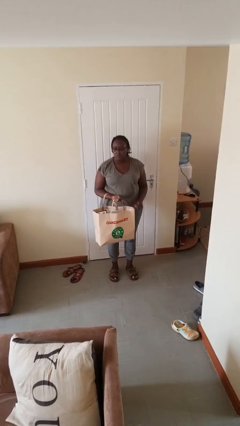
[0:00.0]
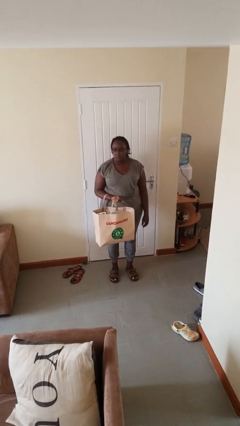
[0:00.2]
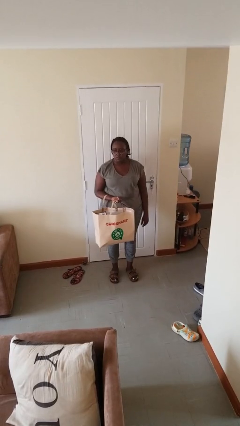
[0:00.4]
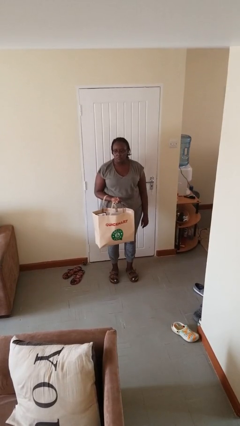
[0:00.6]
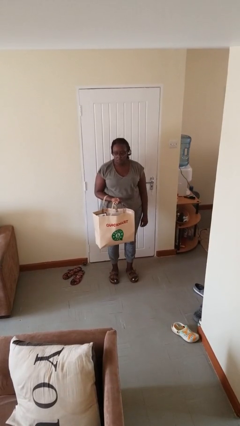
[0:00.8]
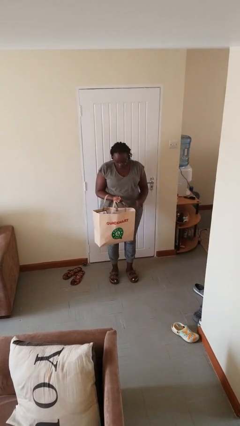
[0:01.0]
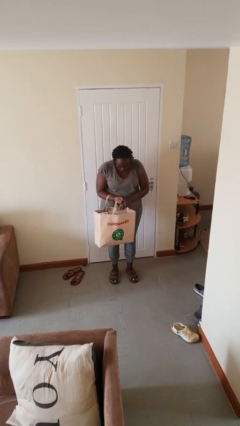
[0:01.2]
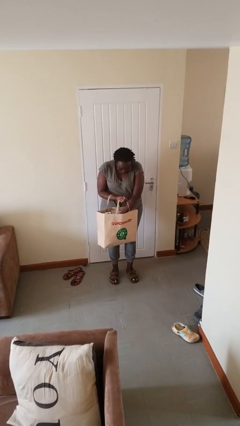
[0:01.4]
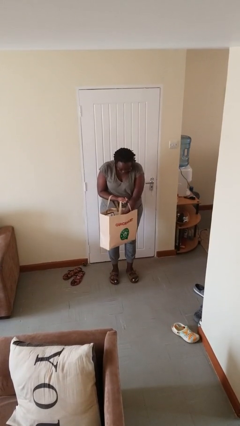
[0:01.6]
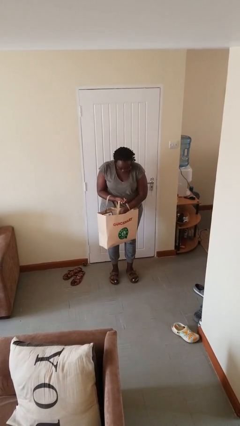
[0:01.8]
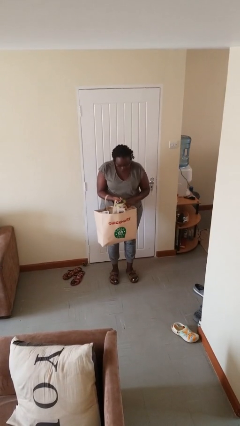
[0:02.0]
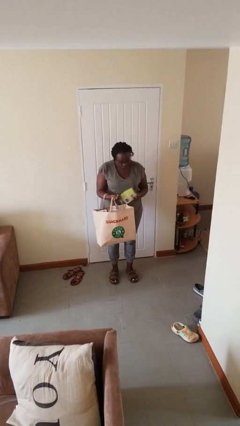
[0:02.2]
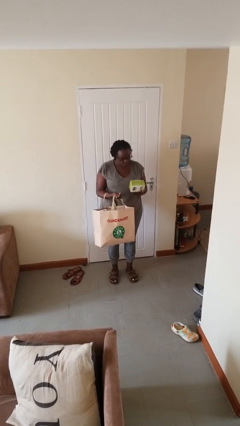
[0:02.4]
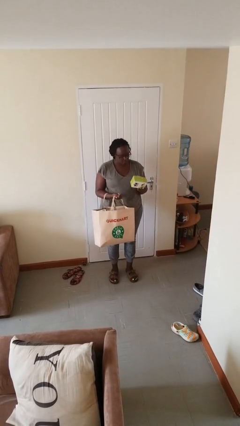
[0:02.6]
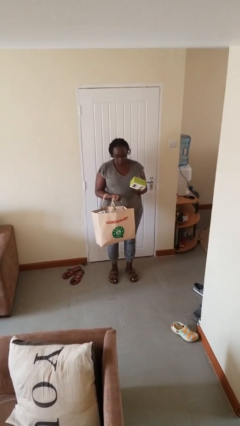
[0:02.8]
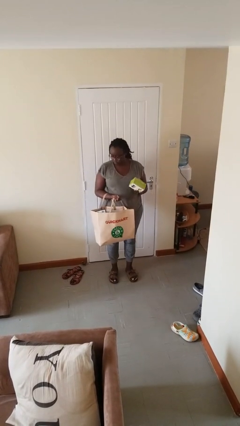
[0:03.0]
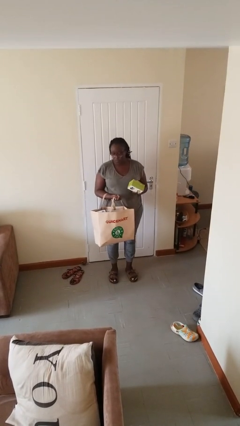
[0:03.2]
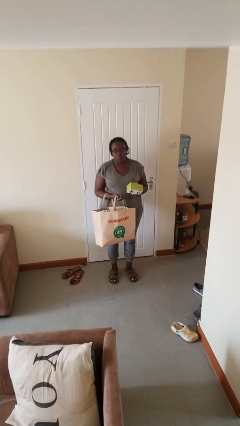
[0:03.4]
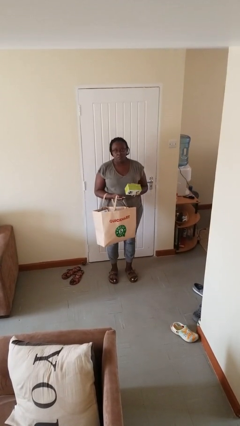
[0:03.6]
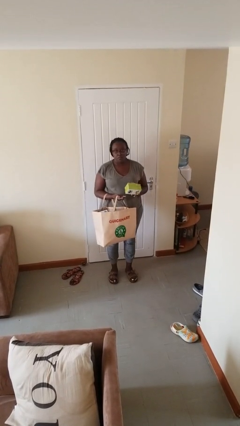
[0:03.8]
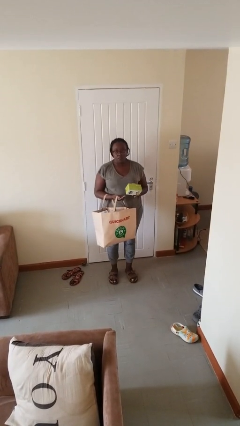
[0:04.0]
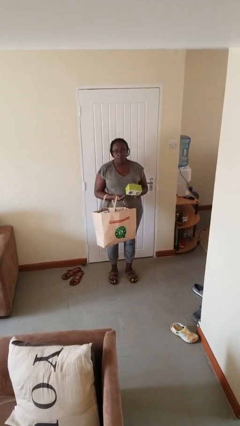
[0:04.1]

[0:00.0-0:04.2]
person takes object from bag

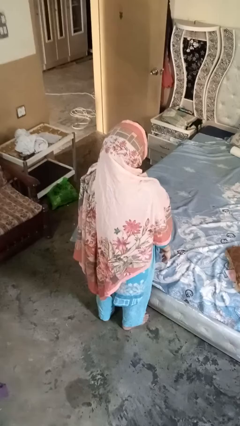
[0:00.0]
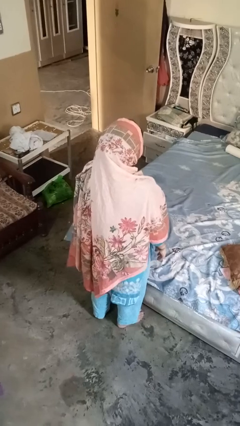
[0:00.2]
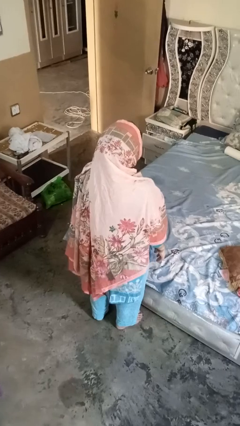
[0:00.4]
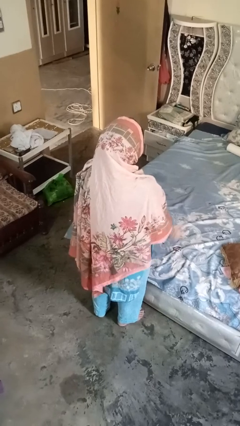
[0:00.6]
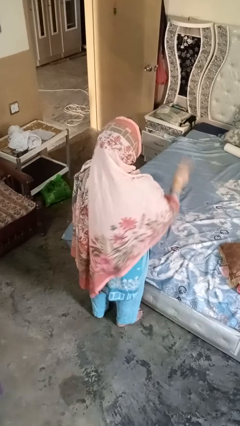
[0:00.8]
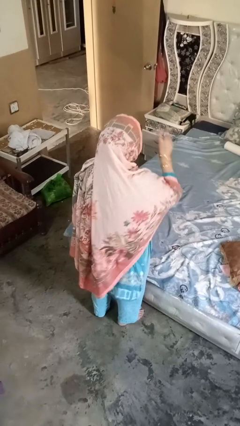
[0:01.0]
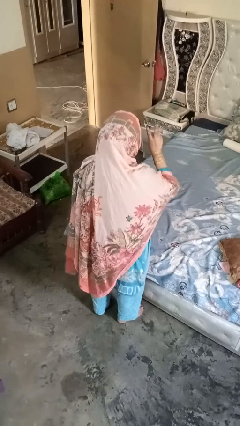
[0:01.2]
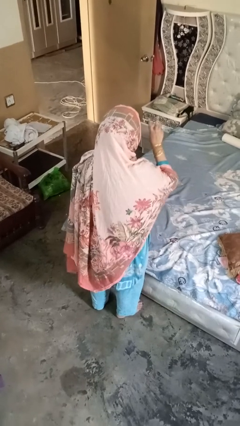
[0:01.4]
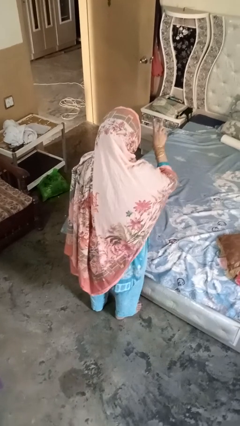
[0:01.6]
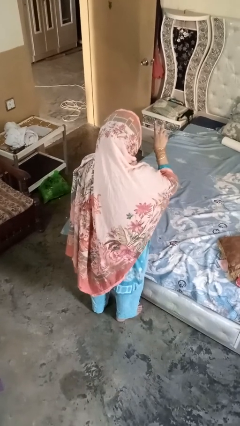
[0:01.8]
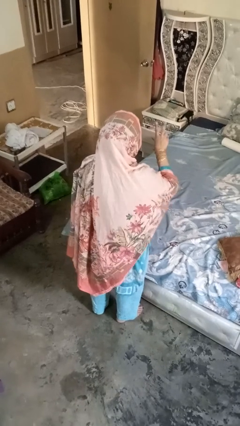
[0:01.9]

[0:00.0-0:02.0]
person gestures be quiet

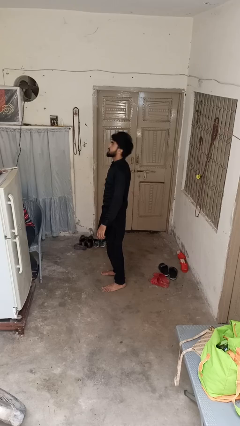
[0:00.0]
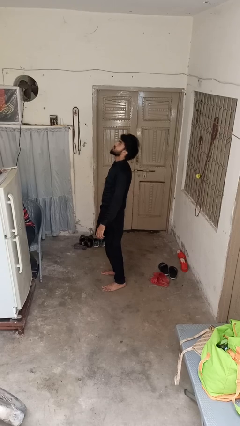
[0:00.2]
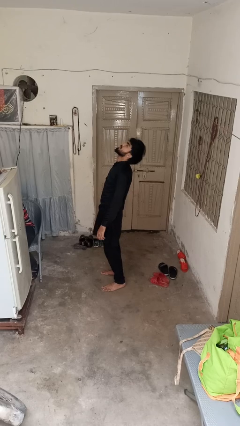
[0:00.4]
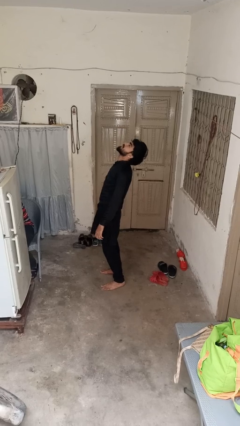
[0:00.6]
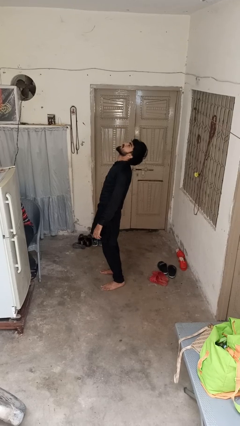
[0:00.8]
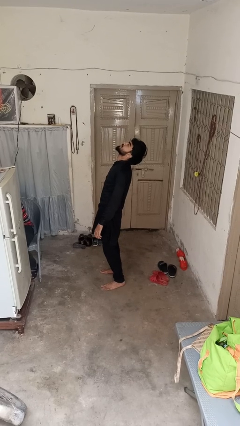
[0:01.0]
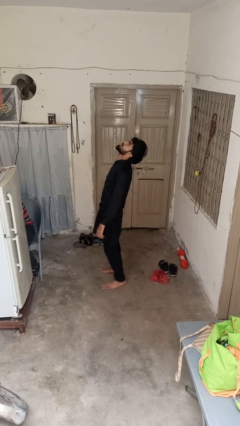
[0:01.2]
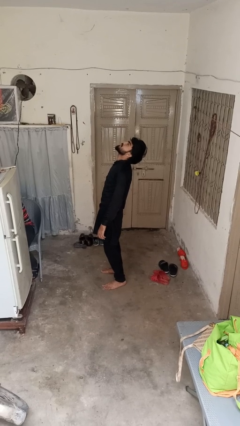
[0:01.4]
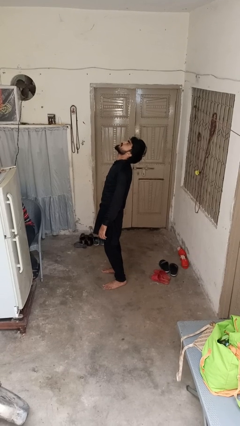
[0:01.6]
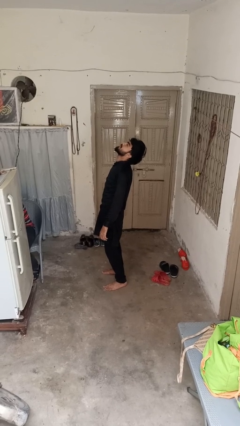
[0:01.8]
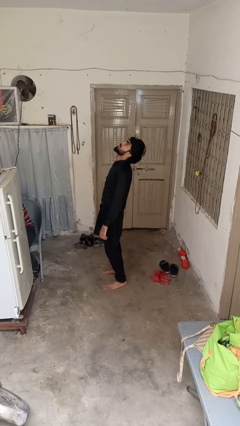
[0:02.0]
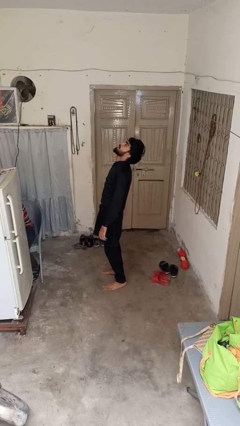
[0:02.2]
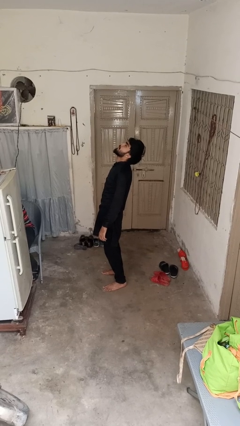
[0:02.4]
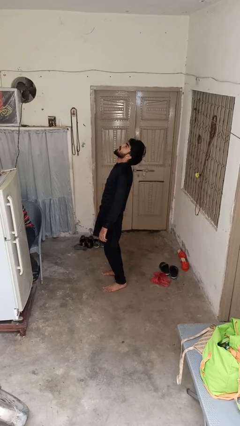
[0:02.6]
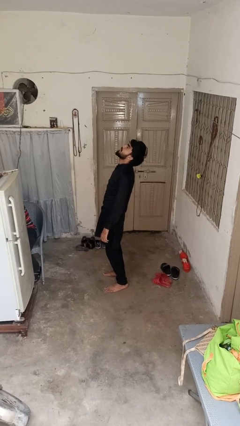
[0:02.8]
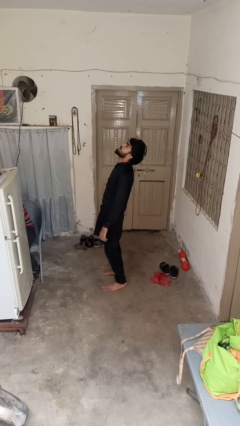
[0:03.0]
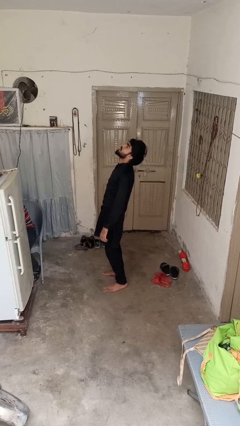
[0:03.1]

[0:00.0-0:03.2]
person stretches back

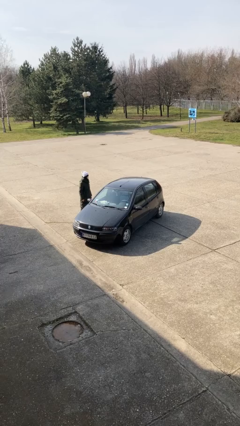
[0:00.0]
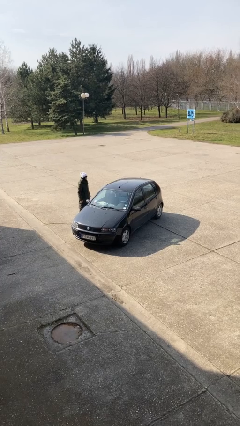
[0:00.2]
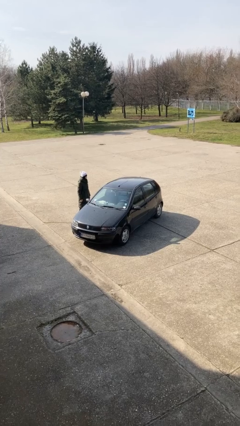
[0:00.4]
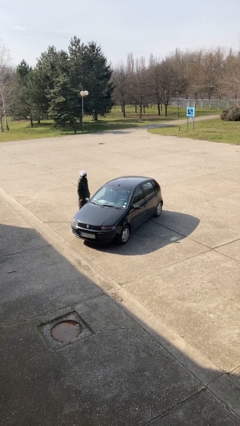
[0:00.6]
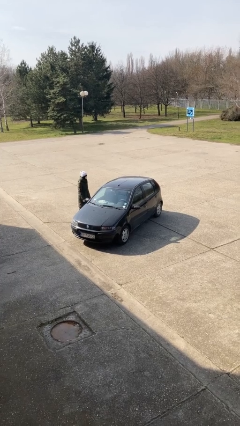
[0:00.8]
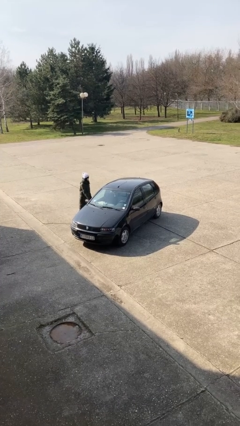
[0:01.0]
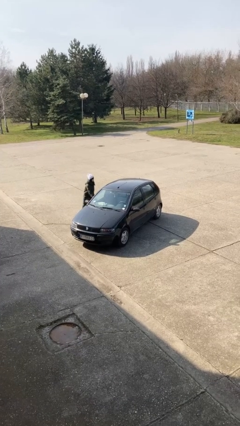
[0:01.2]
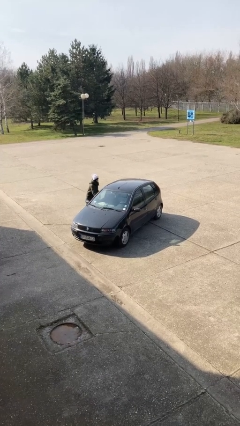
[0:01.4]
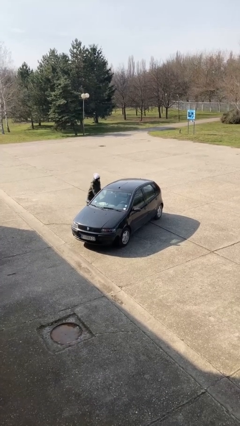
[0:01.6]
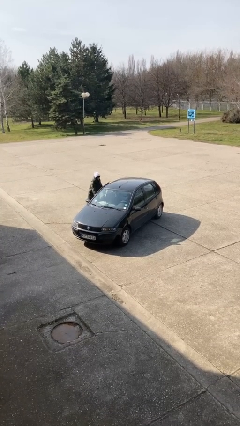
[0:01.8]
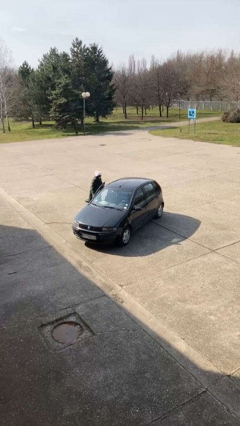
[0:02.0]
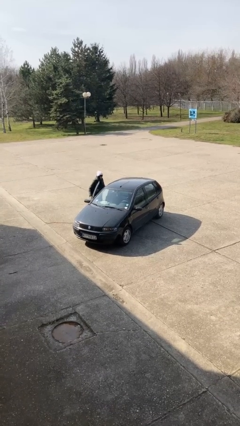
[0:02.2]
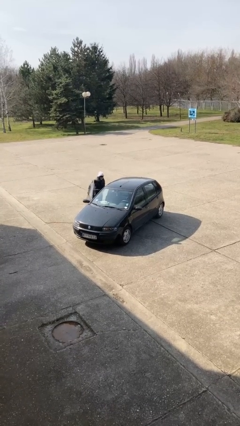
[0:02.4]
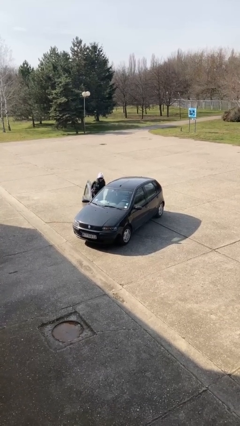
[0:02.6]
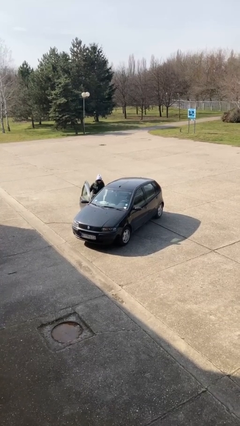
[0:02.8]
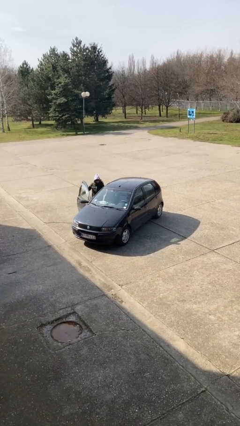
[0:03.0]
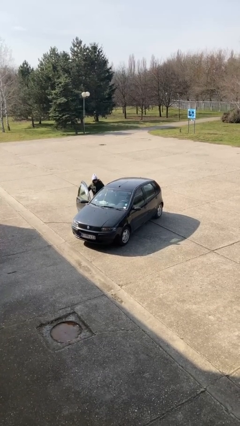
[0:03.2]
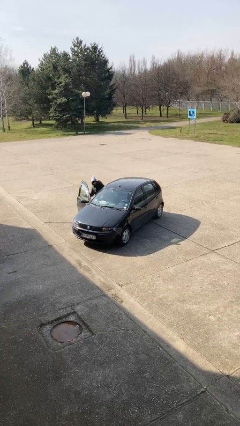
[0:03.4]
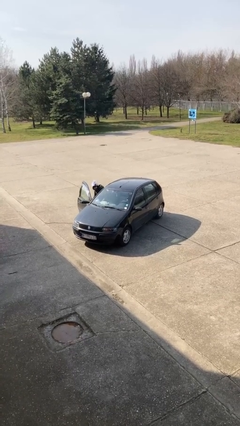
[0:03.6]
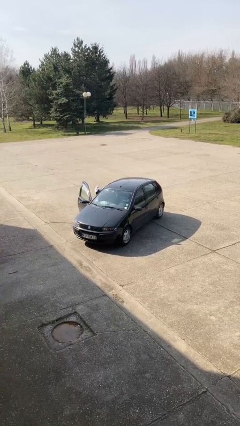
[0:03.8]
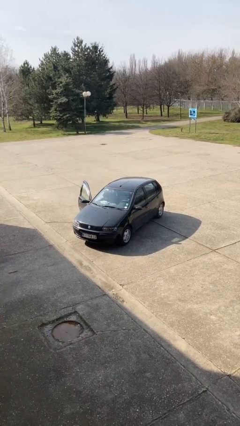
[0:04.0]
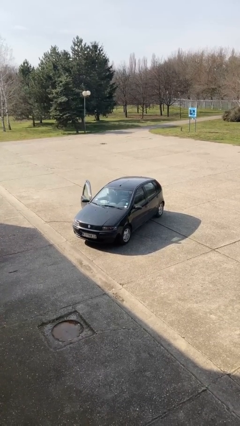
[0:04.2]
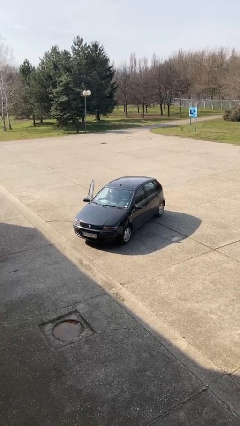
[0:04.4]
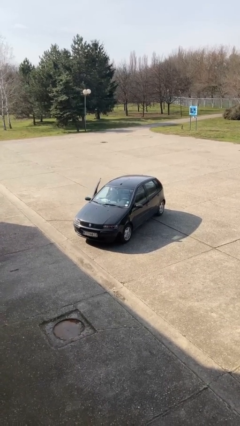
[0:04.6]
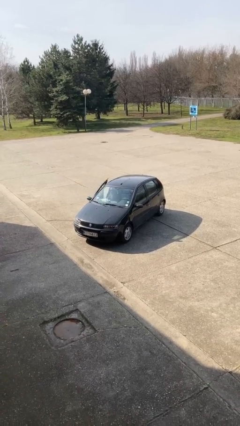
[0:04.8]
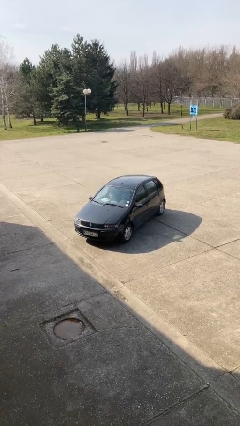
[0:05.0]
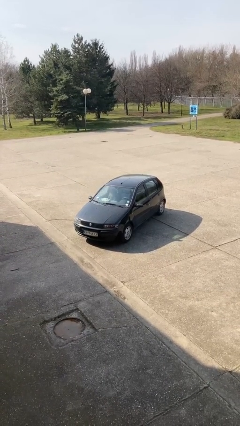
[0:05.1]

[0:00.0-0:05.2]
car picks up person

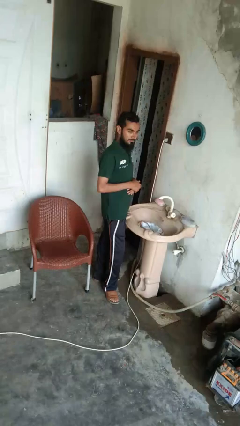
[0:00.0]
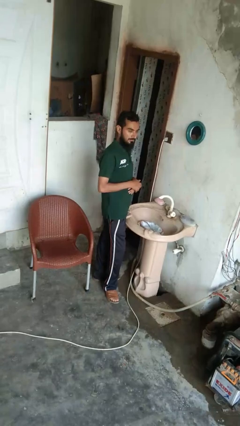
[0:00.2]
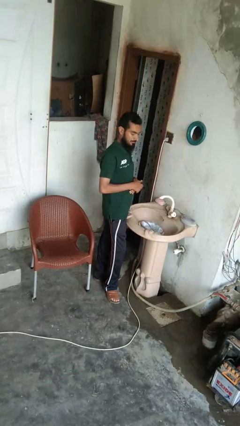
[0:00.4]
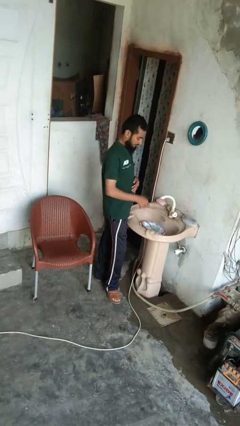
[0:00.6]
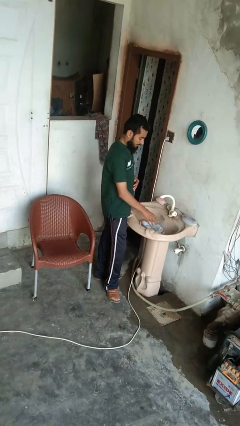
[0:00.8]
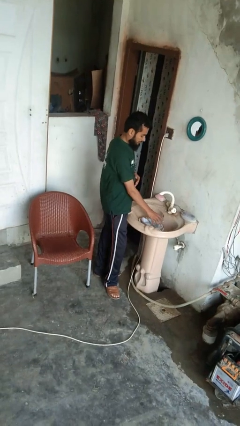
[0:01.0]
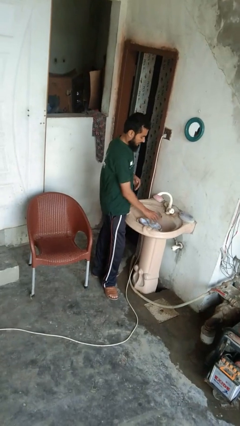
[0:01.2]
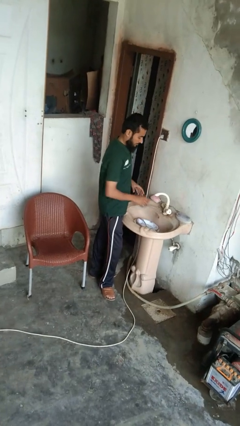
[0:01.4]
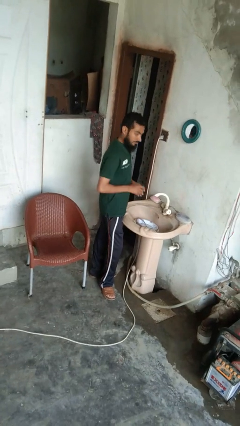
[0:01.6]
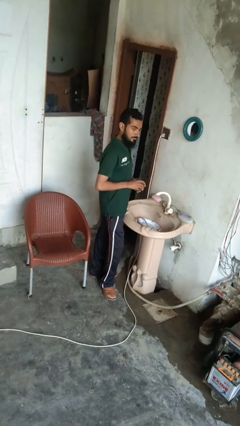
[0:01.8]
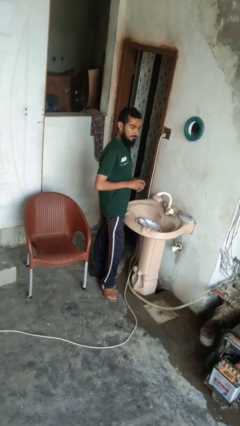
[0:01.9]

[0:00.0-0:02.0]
person unloads dishwasher

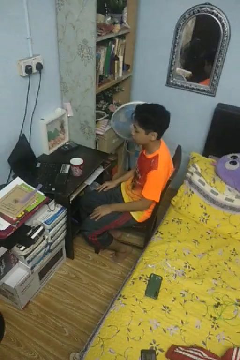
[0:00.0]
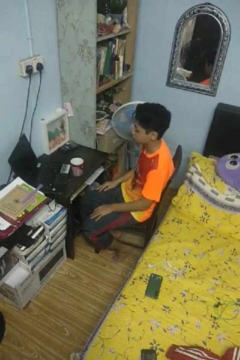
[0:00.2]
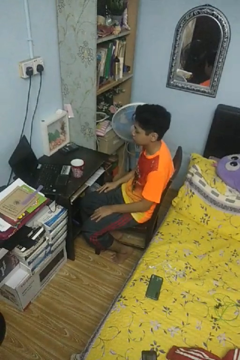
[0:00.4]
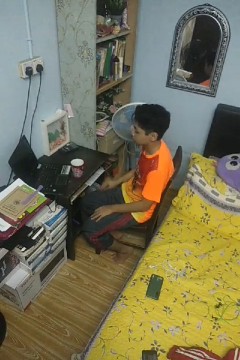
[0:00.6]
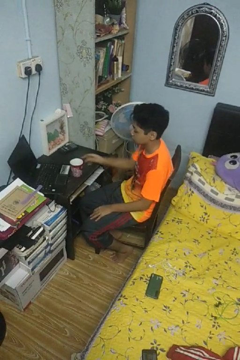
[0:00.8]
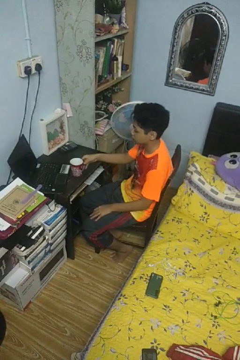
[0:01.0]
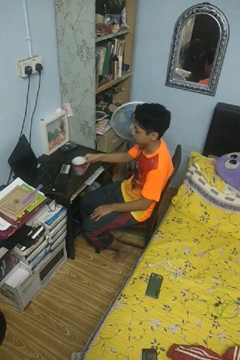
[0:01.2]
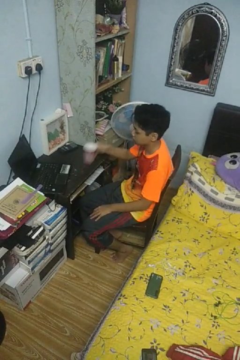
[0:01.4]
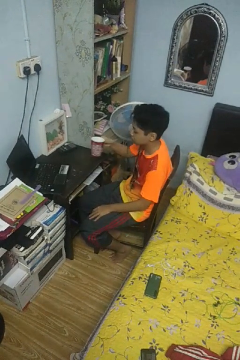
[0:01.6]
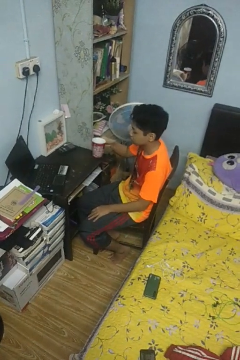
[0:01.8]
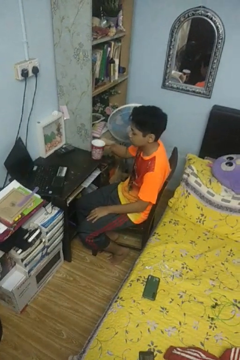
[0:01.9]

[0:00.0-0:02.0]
person closes refrigerator
